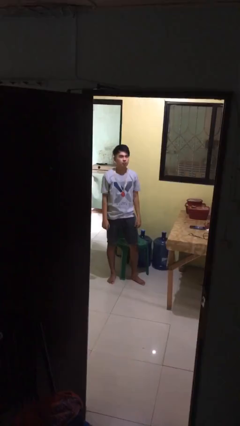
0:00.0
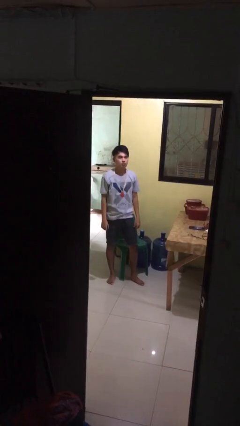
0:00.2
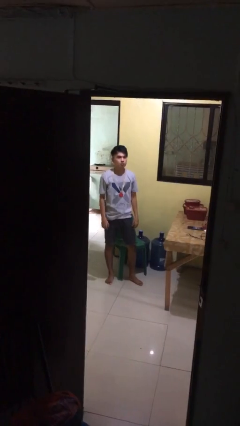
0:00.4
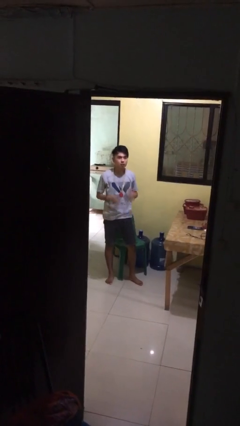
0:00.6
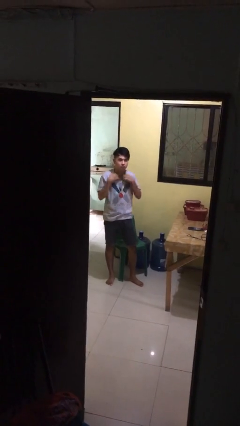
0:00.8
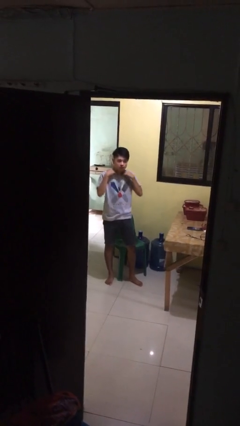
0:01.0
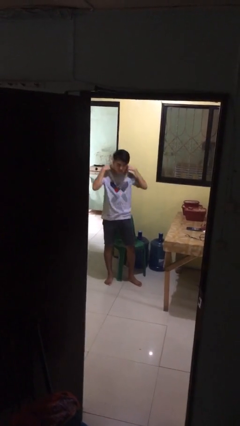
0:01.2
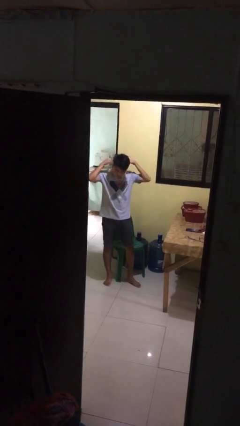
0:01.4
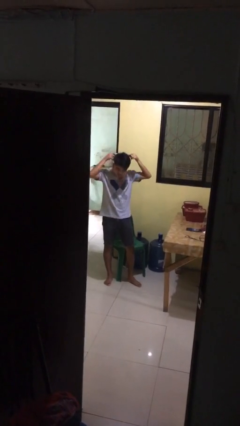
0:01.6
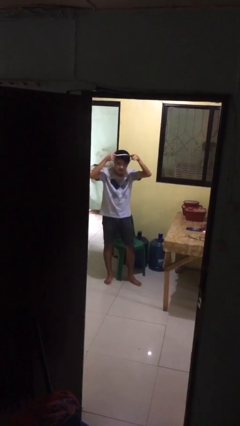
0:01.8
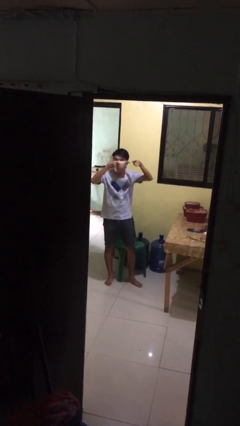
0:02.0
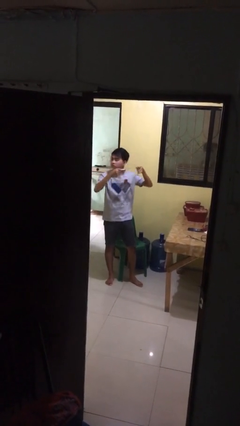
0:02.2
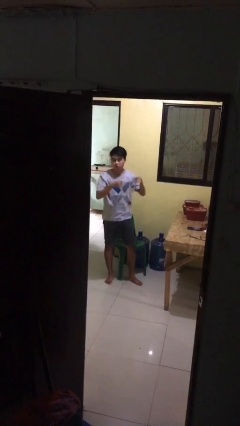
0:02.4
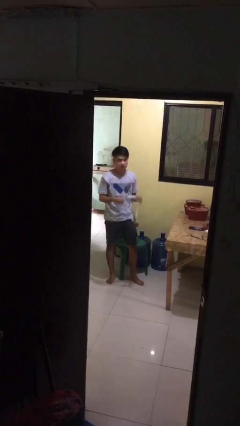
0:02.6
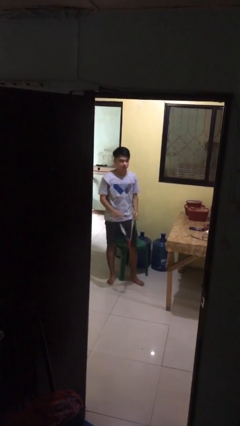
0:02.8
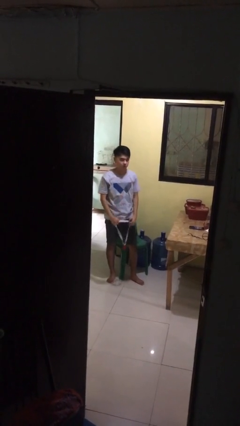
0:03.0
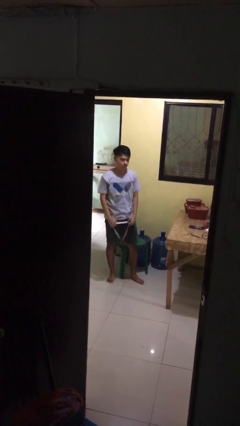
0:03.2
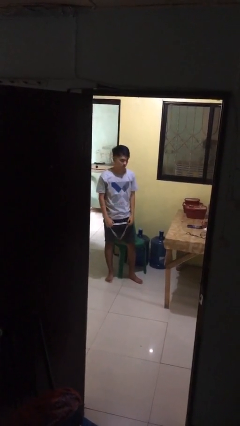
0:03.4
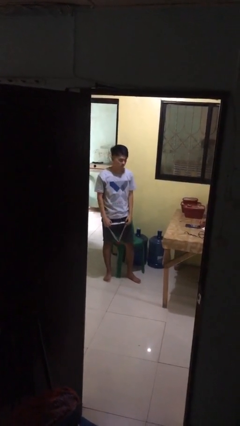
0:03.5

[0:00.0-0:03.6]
person takes off necklace

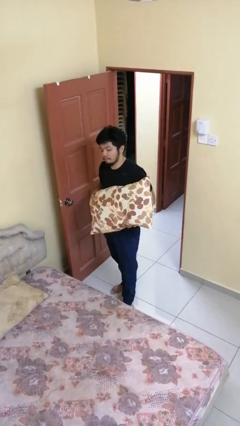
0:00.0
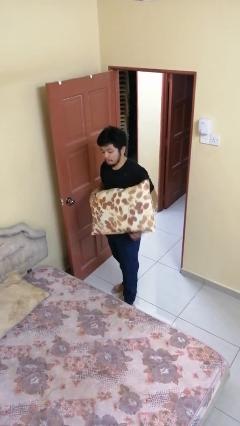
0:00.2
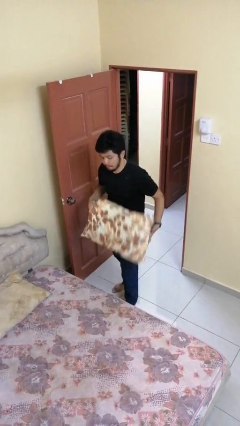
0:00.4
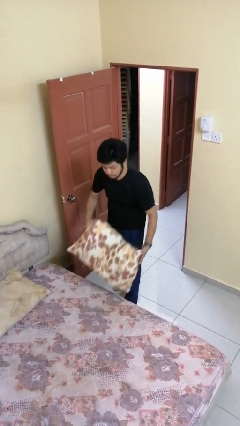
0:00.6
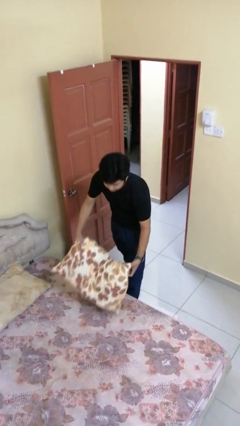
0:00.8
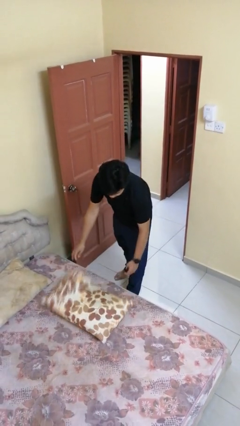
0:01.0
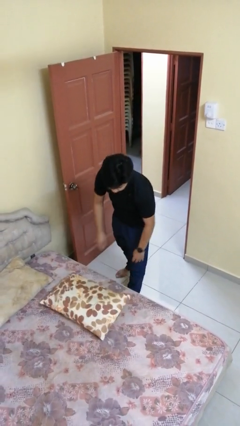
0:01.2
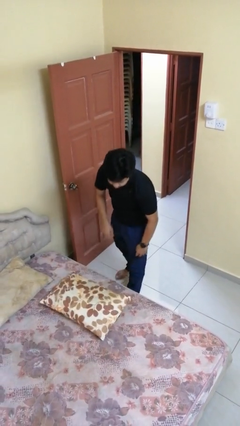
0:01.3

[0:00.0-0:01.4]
person puts down object on bed

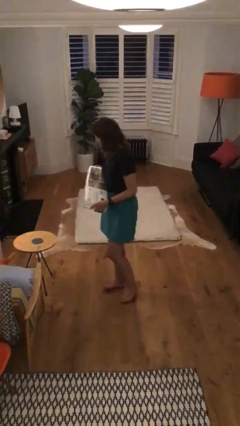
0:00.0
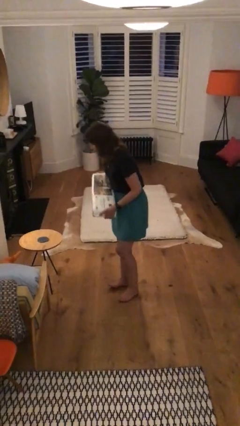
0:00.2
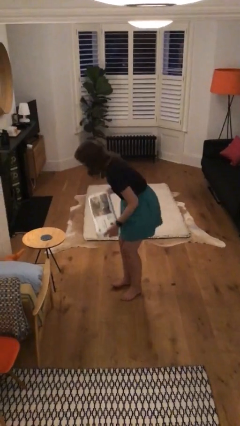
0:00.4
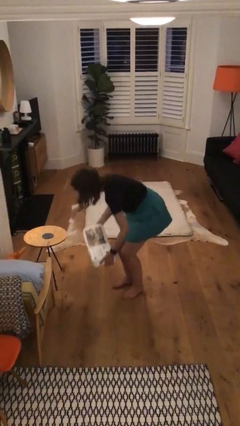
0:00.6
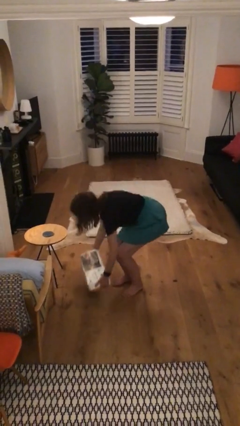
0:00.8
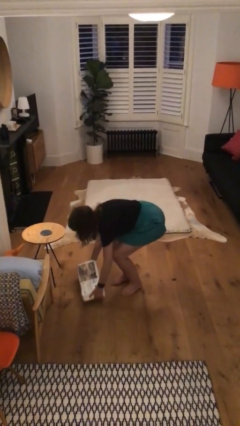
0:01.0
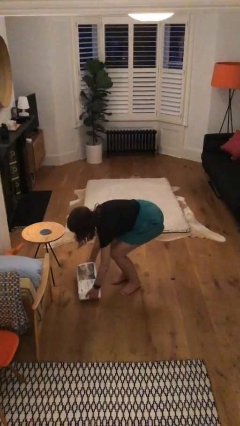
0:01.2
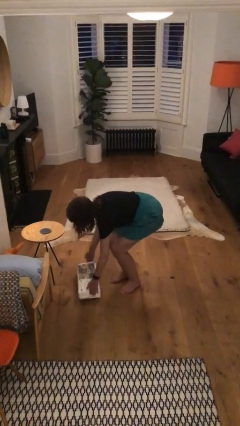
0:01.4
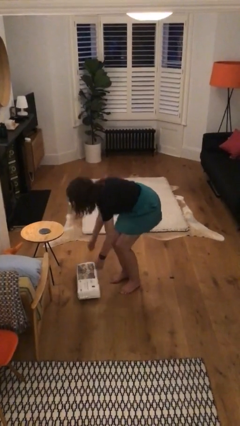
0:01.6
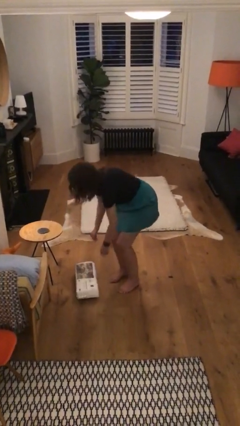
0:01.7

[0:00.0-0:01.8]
person puts down object on floor

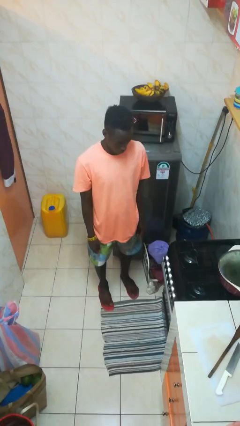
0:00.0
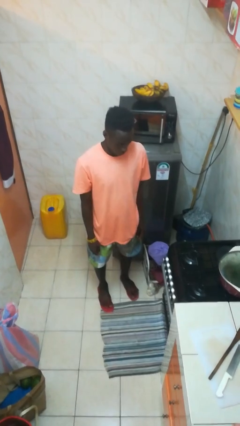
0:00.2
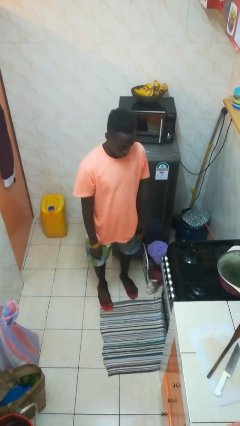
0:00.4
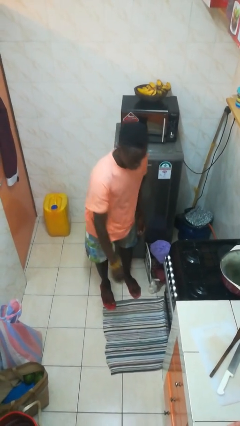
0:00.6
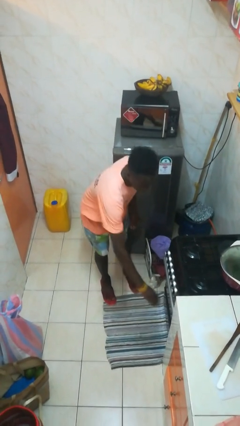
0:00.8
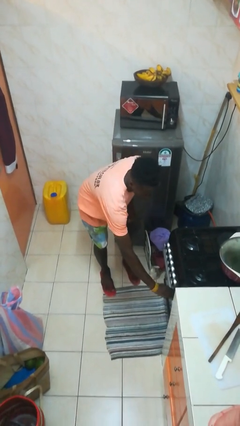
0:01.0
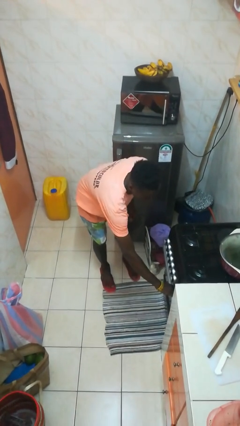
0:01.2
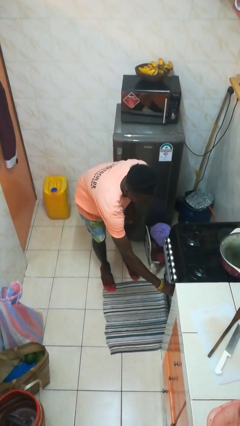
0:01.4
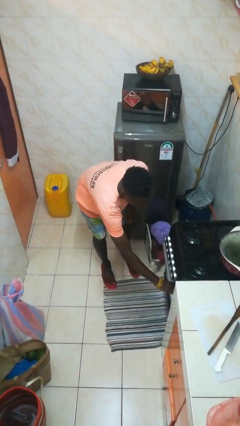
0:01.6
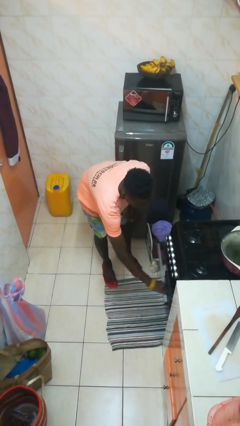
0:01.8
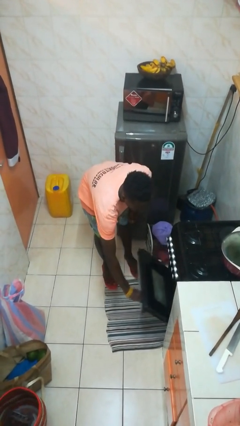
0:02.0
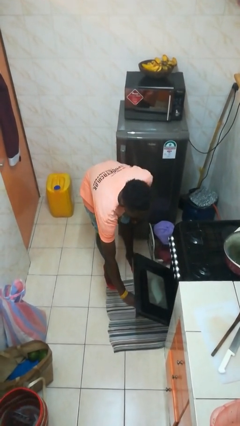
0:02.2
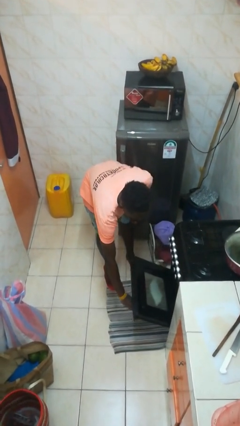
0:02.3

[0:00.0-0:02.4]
person opens oven door

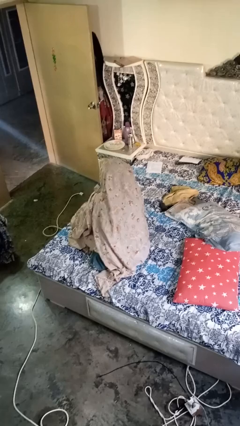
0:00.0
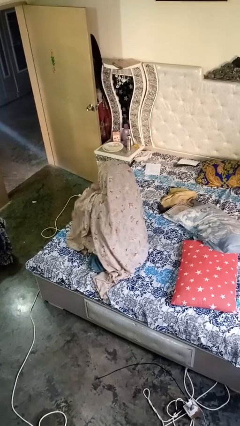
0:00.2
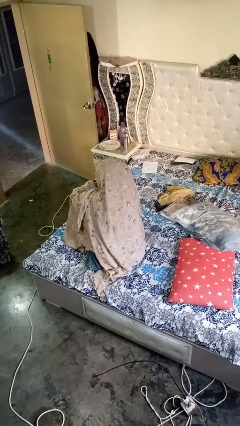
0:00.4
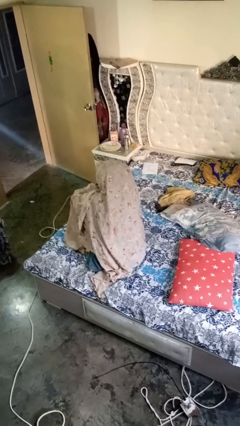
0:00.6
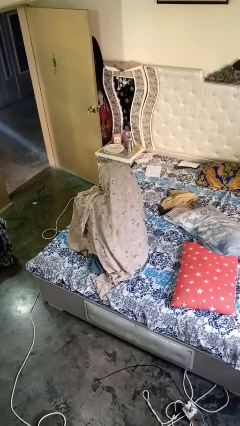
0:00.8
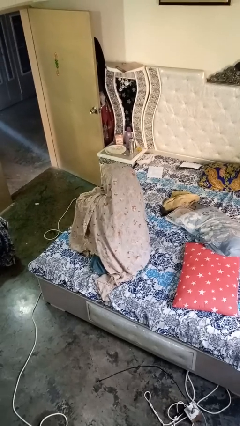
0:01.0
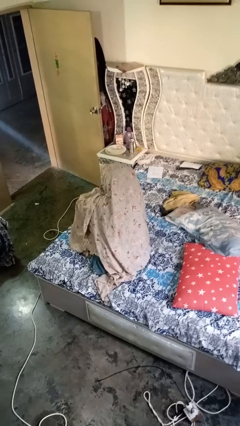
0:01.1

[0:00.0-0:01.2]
person looks at wristwatch

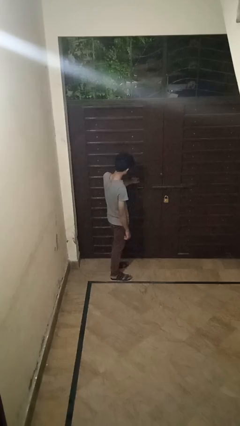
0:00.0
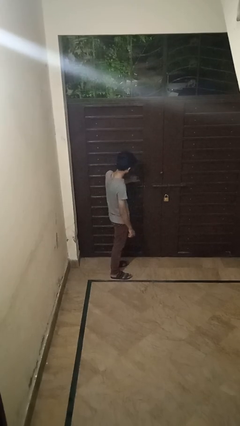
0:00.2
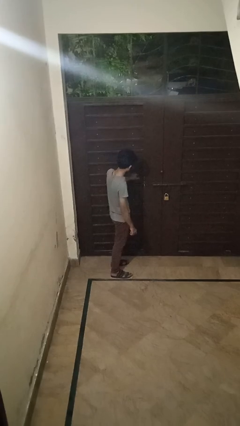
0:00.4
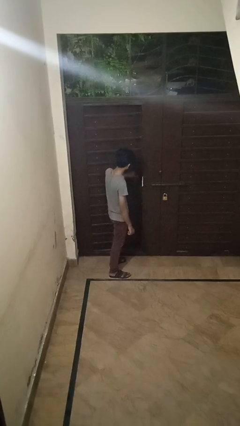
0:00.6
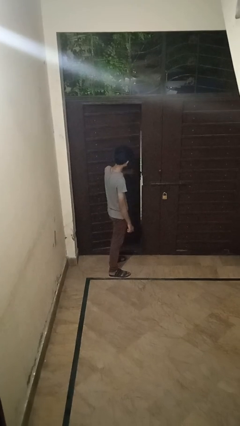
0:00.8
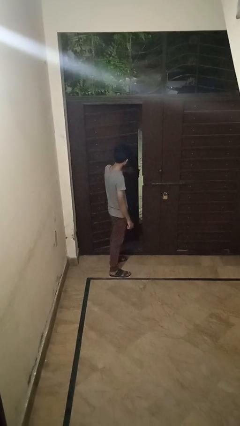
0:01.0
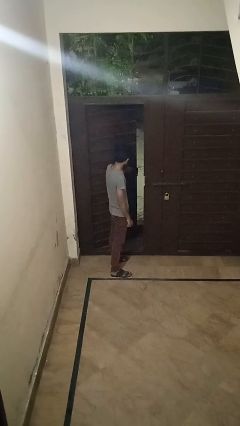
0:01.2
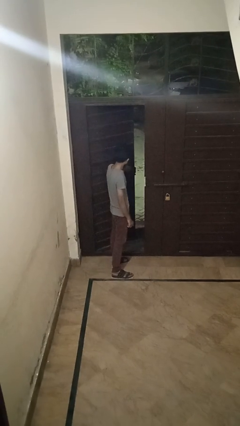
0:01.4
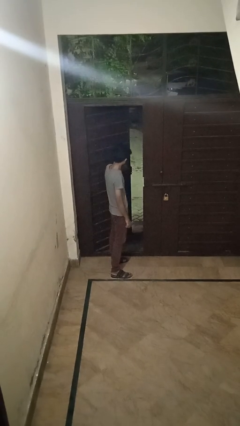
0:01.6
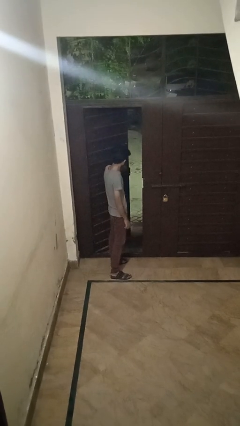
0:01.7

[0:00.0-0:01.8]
person opens facility door

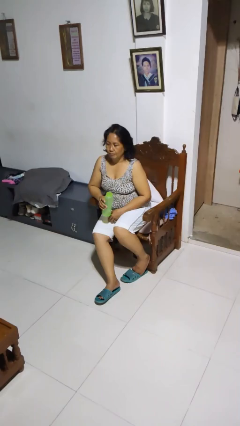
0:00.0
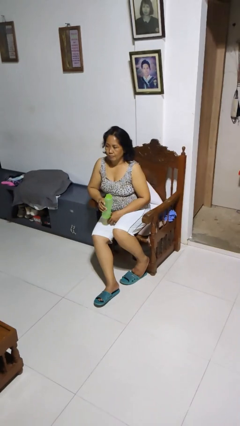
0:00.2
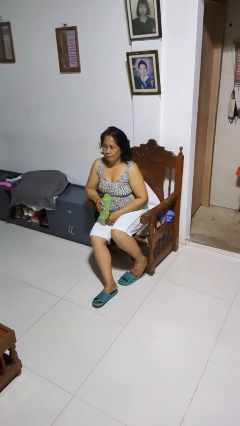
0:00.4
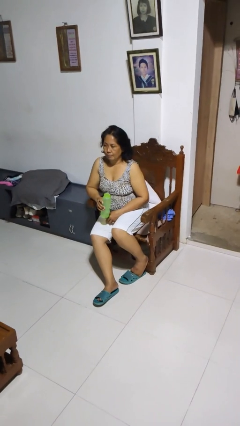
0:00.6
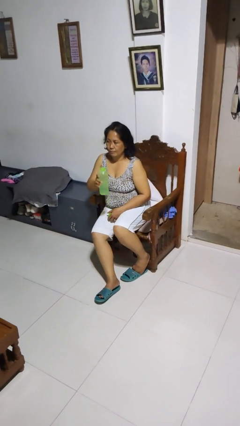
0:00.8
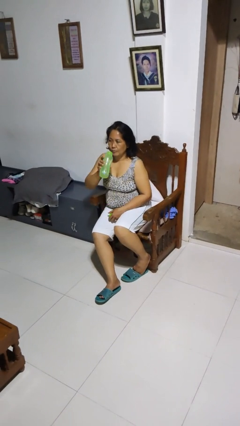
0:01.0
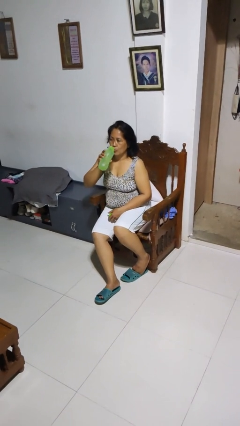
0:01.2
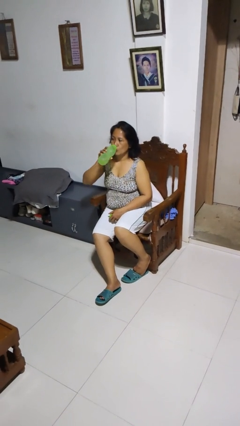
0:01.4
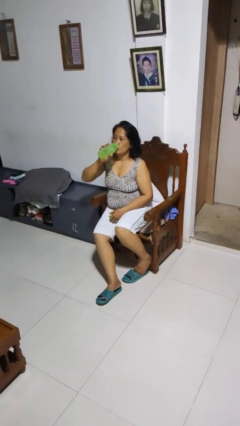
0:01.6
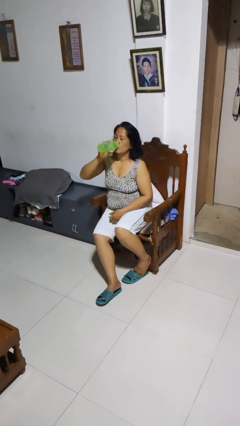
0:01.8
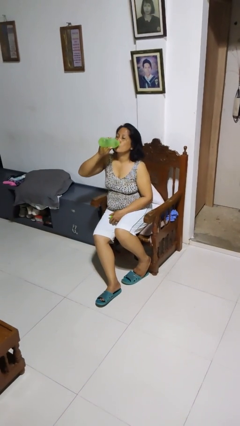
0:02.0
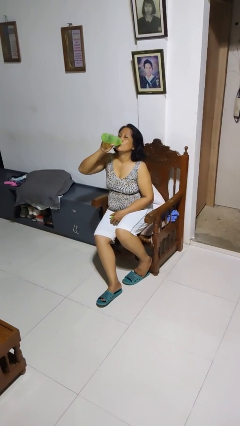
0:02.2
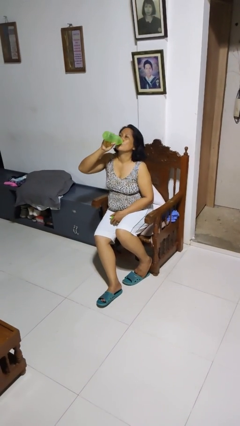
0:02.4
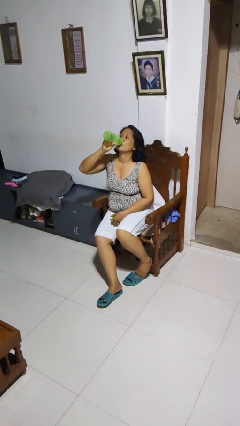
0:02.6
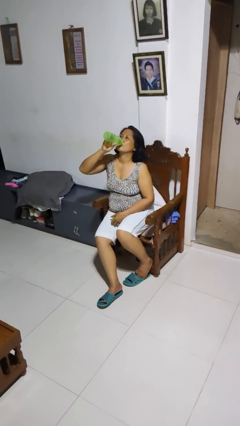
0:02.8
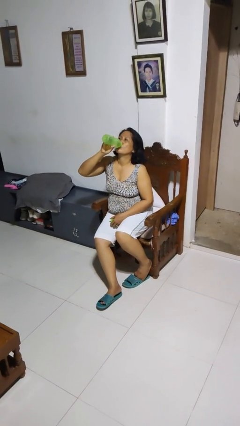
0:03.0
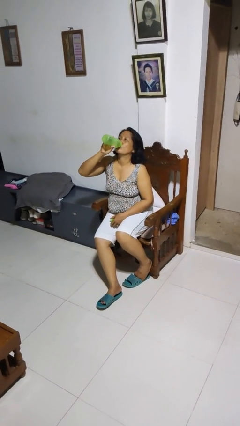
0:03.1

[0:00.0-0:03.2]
person drinks from bottle

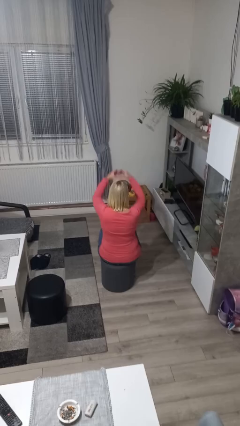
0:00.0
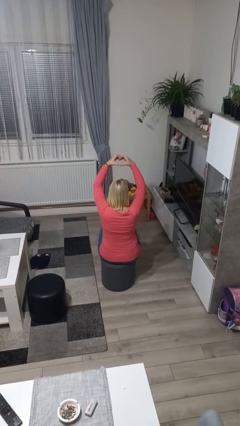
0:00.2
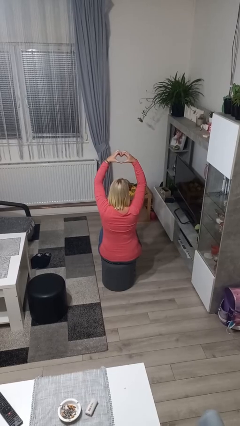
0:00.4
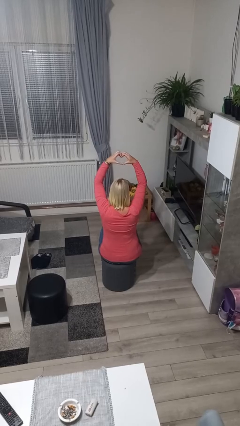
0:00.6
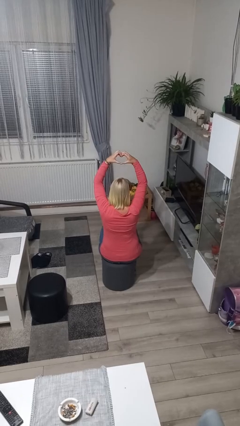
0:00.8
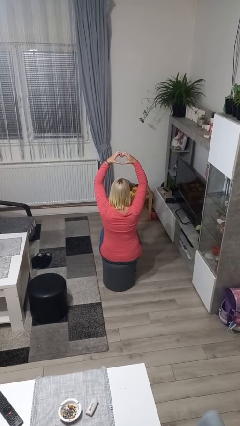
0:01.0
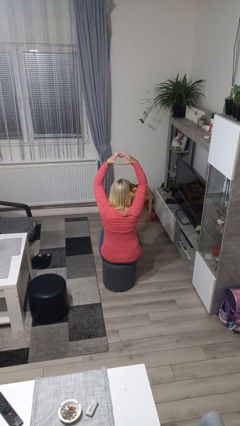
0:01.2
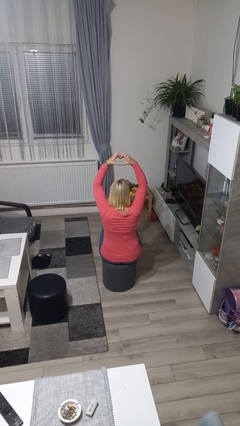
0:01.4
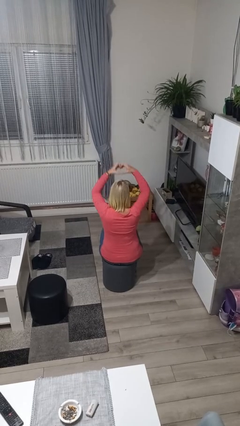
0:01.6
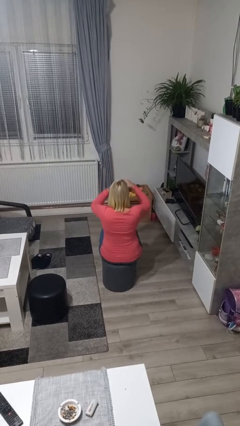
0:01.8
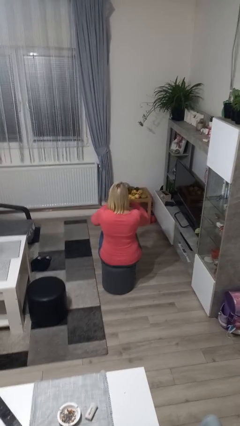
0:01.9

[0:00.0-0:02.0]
person gestures heart
